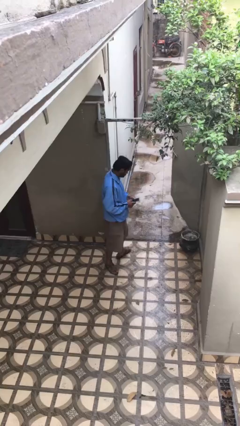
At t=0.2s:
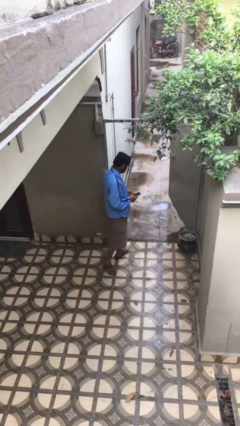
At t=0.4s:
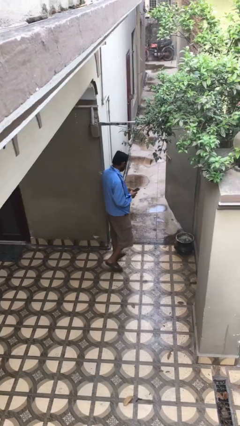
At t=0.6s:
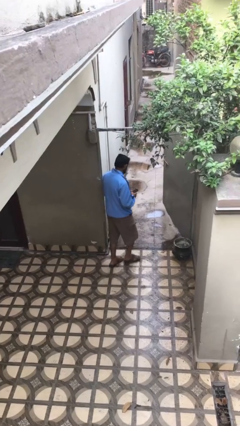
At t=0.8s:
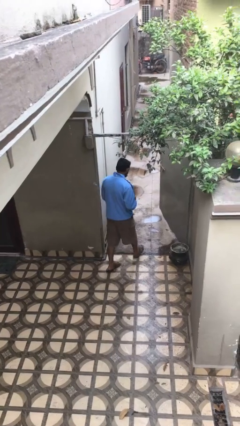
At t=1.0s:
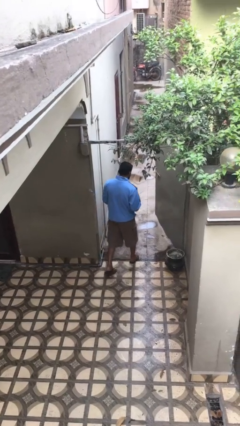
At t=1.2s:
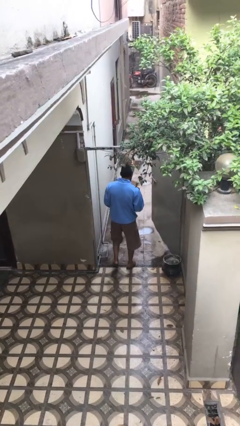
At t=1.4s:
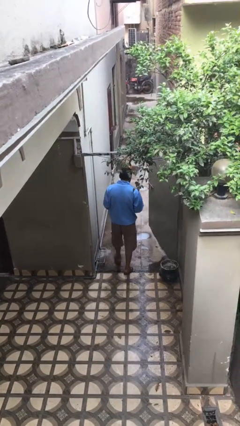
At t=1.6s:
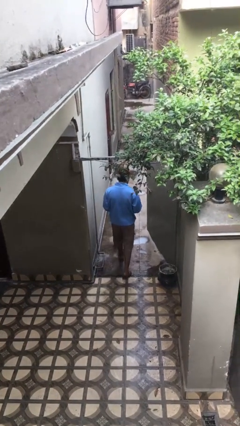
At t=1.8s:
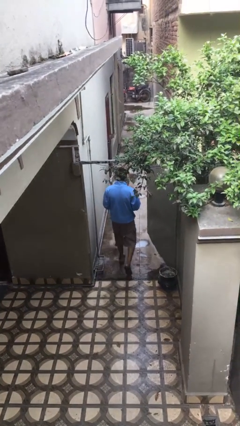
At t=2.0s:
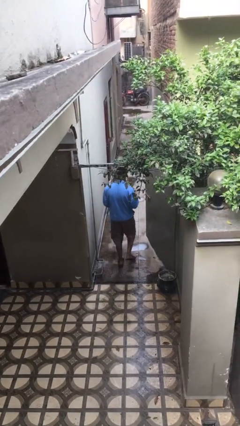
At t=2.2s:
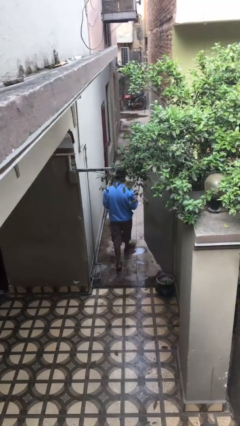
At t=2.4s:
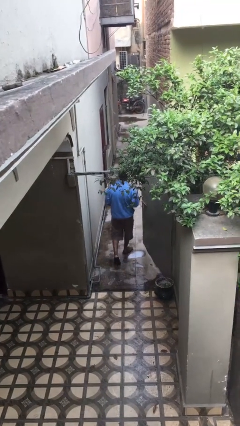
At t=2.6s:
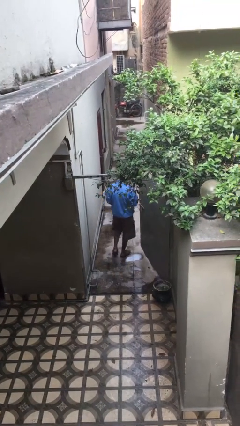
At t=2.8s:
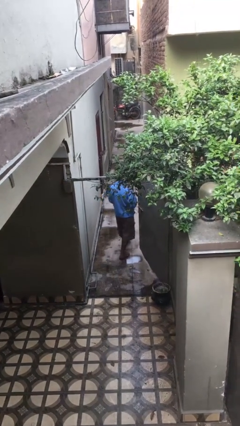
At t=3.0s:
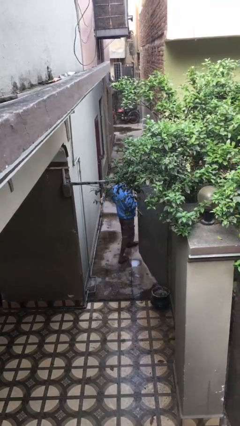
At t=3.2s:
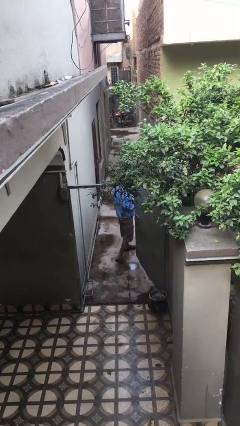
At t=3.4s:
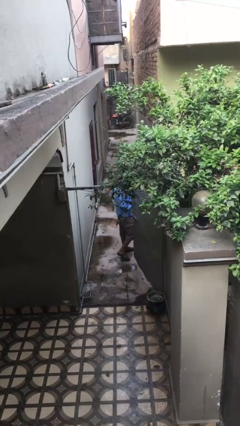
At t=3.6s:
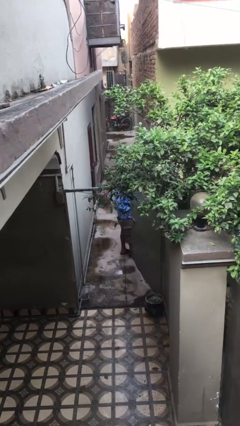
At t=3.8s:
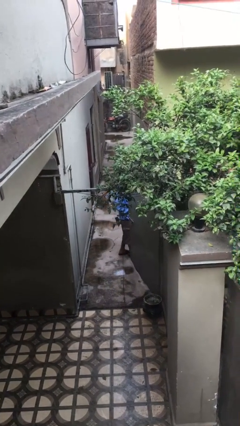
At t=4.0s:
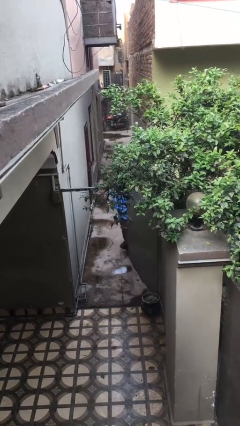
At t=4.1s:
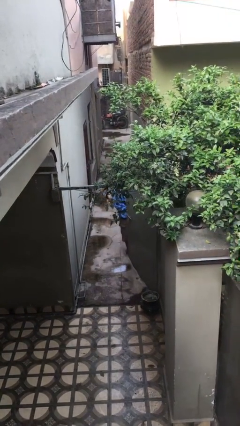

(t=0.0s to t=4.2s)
person exits scene through structure

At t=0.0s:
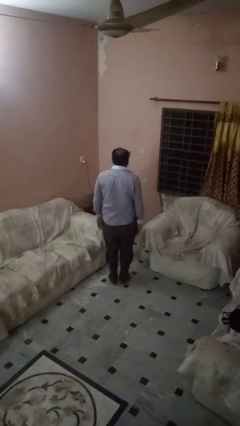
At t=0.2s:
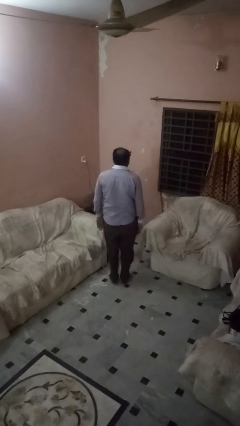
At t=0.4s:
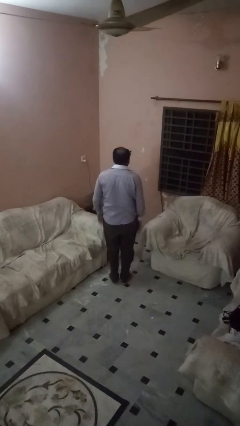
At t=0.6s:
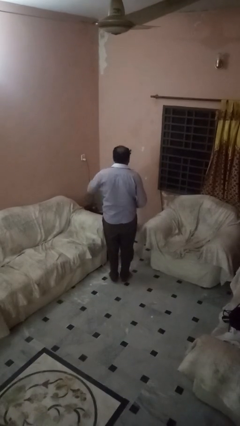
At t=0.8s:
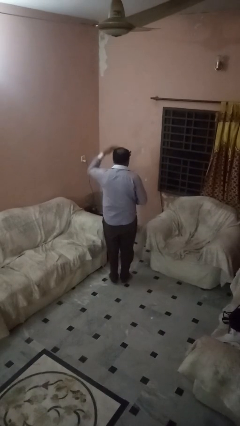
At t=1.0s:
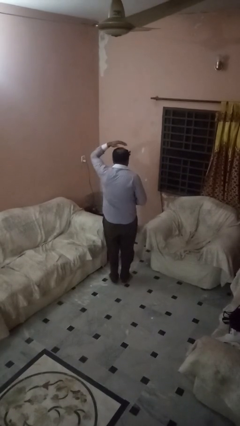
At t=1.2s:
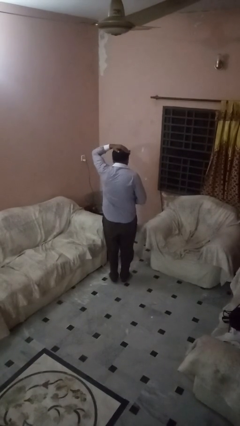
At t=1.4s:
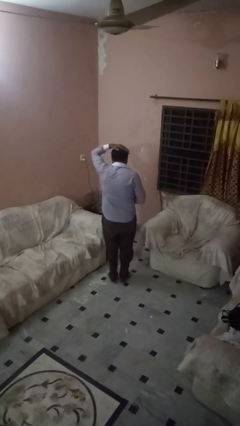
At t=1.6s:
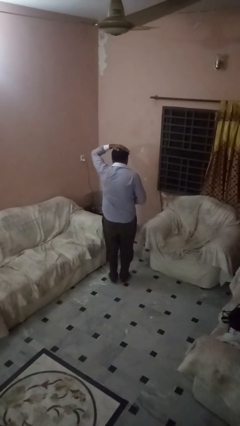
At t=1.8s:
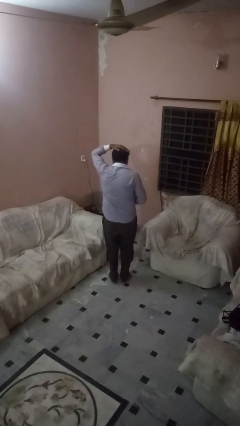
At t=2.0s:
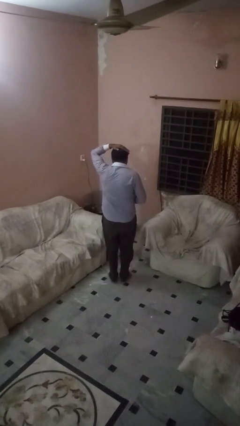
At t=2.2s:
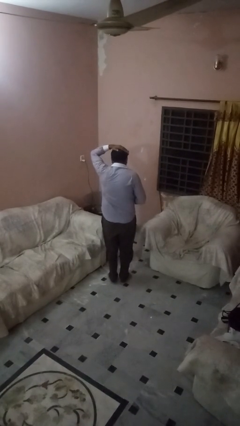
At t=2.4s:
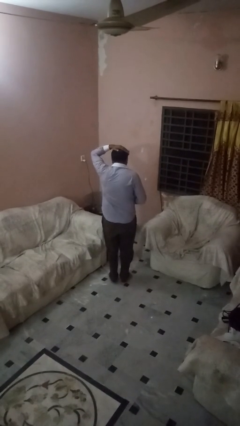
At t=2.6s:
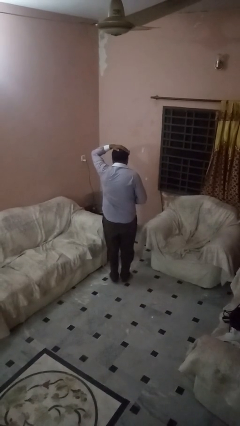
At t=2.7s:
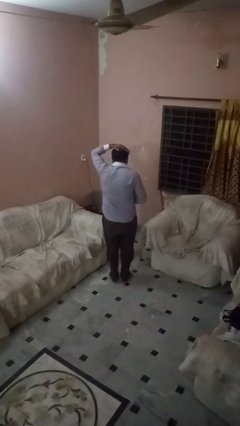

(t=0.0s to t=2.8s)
person pats head

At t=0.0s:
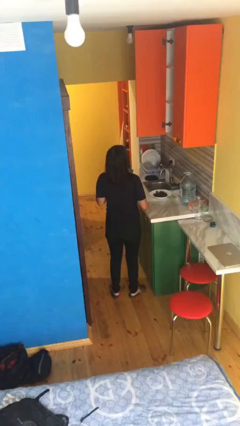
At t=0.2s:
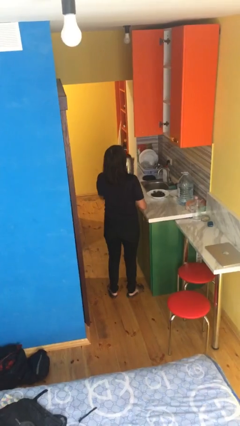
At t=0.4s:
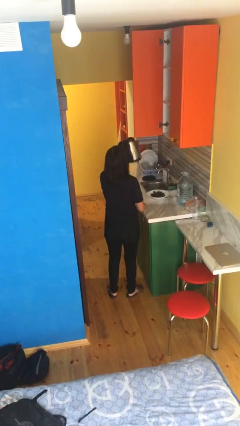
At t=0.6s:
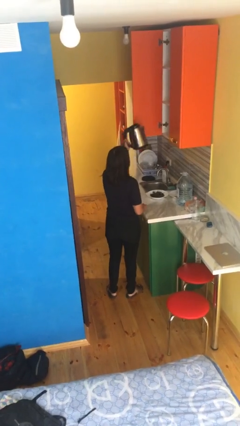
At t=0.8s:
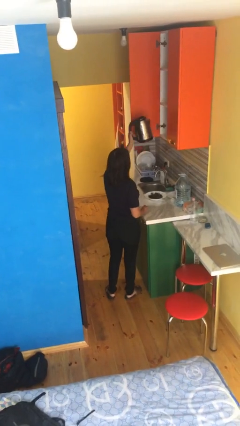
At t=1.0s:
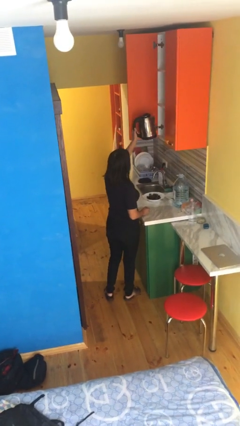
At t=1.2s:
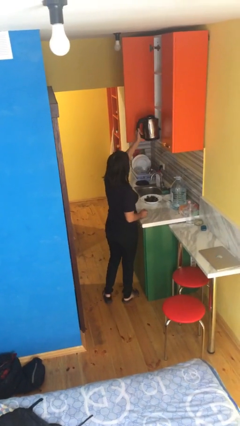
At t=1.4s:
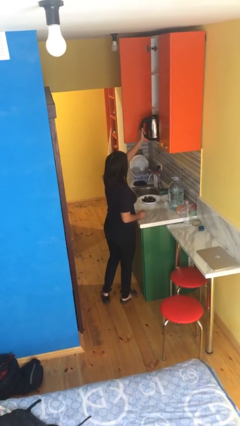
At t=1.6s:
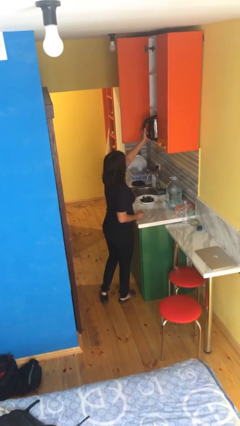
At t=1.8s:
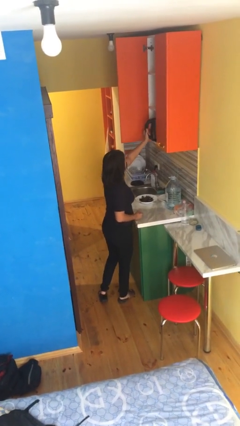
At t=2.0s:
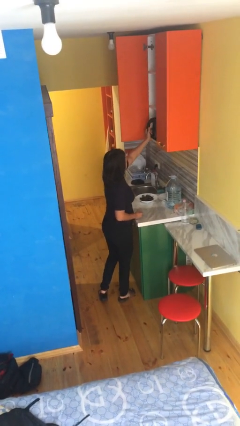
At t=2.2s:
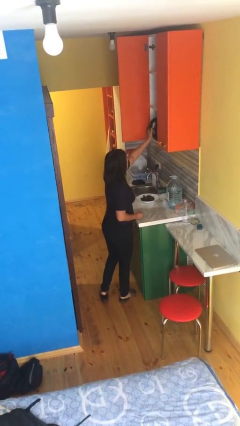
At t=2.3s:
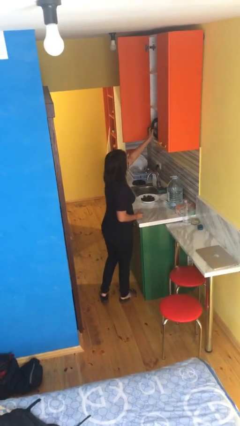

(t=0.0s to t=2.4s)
person puts down object into cabinet

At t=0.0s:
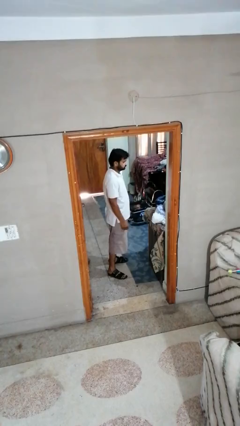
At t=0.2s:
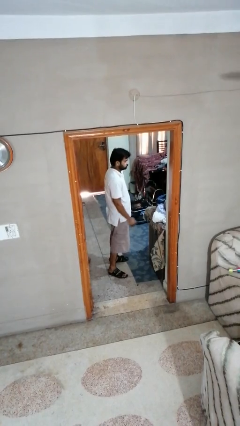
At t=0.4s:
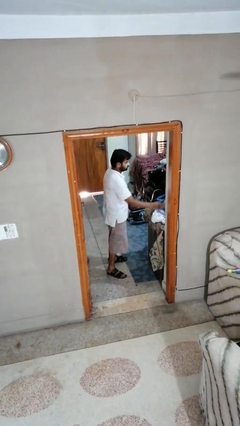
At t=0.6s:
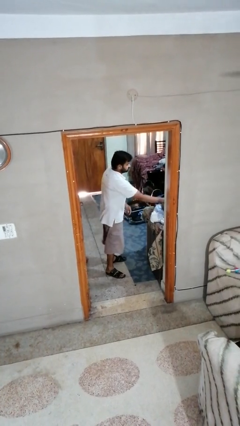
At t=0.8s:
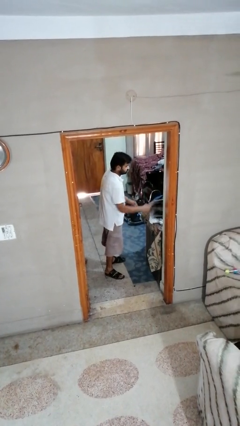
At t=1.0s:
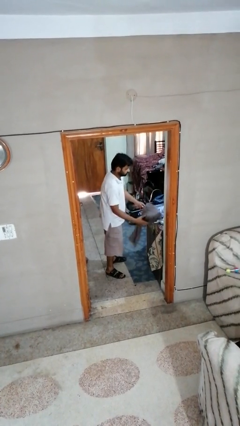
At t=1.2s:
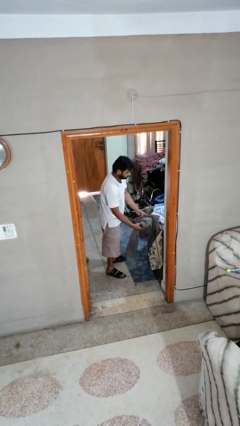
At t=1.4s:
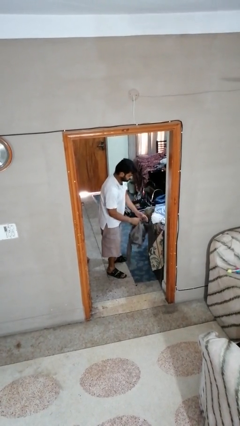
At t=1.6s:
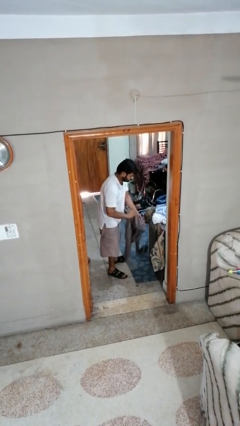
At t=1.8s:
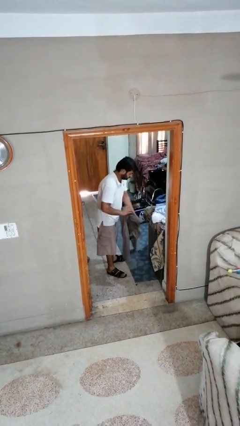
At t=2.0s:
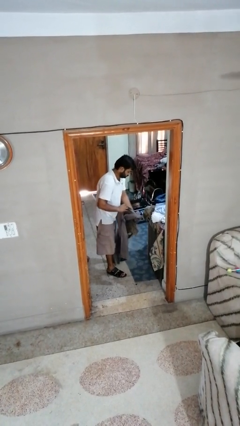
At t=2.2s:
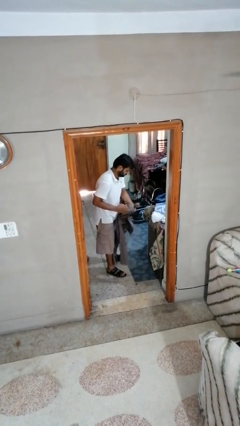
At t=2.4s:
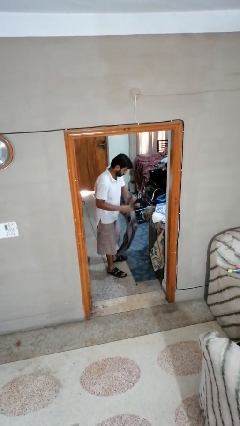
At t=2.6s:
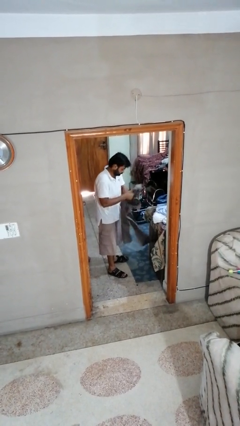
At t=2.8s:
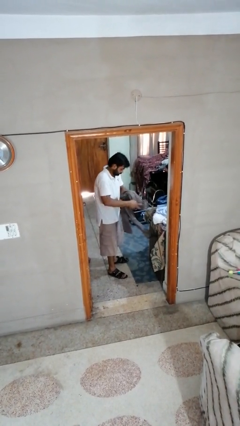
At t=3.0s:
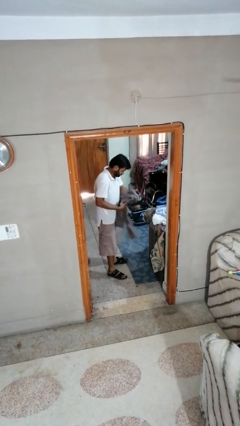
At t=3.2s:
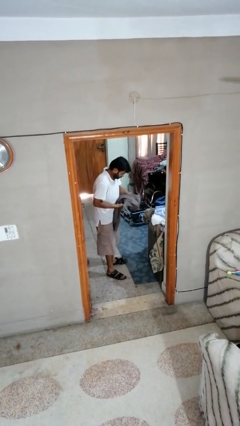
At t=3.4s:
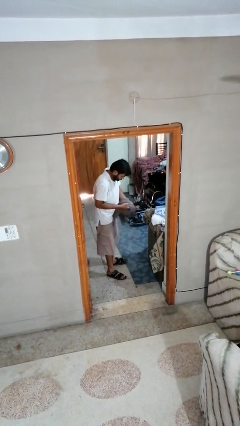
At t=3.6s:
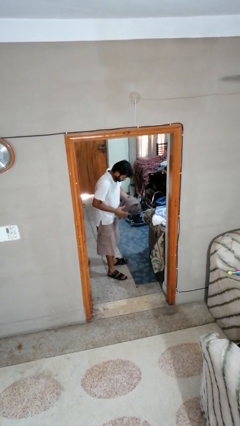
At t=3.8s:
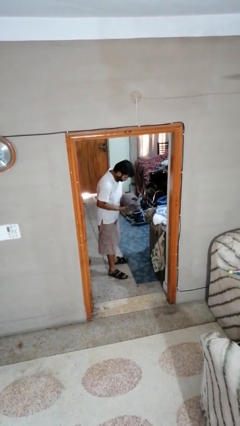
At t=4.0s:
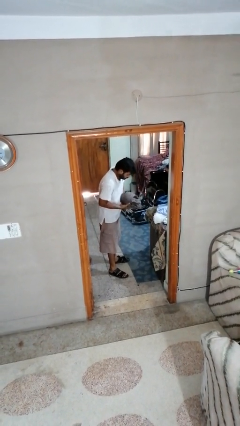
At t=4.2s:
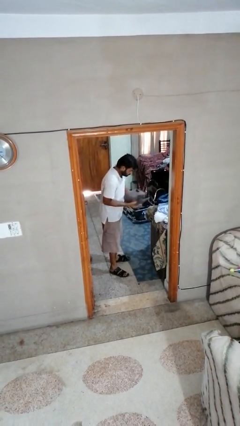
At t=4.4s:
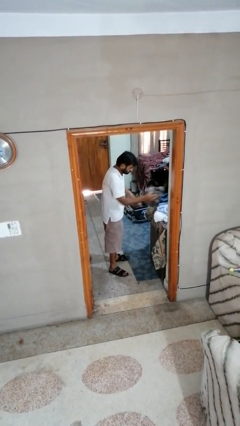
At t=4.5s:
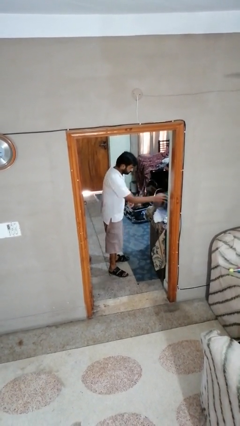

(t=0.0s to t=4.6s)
person folds pants

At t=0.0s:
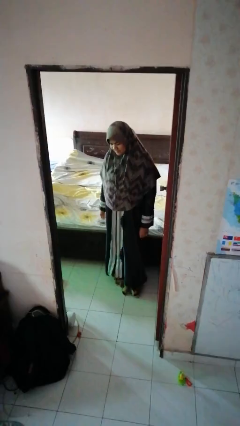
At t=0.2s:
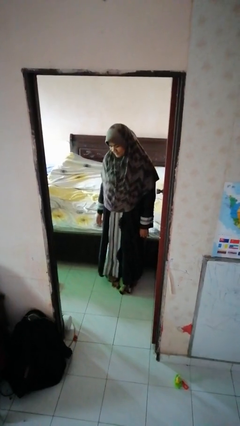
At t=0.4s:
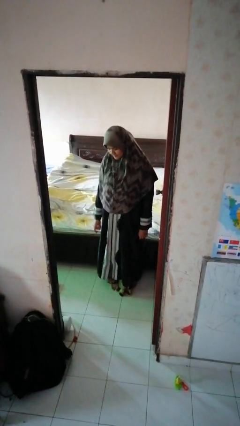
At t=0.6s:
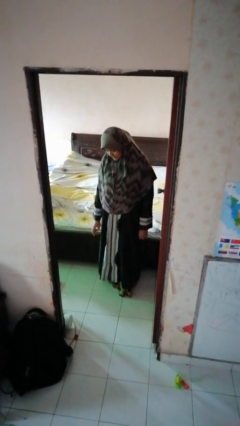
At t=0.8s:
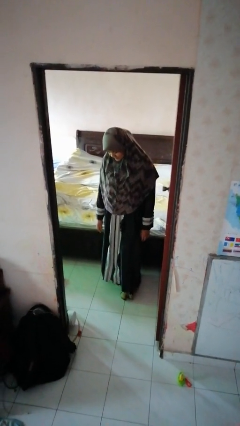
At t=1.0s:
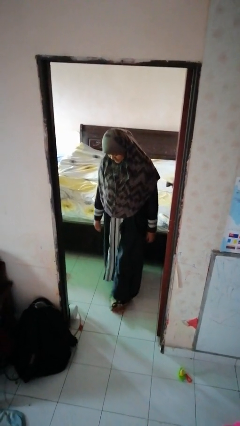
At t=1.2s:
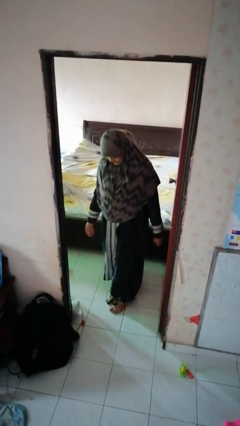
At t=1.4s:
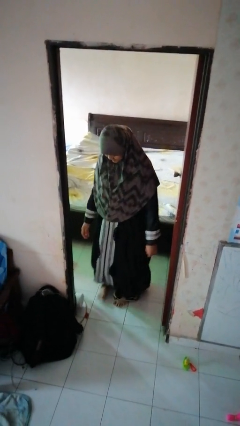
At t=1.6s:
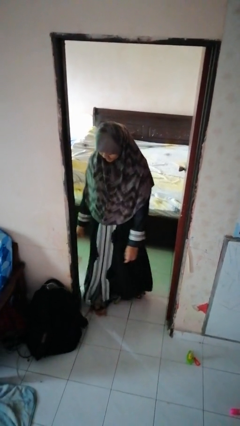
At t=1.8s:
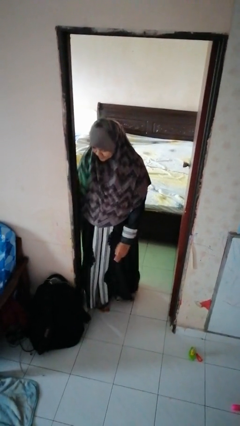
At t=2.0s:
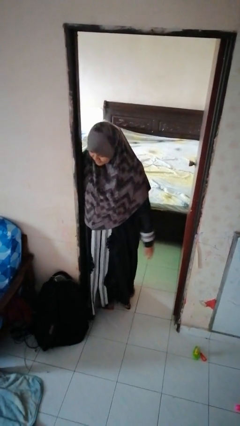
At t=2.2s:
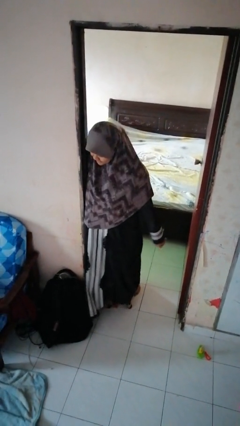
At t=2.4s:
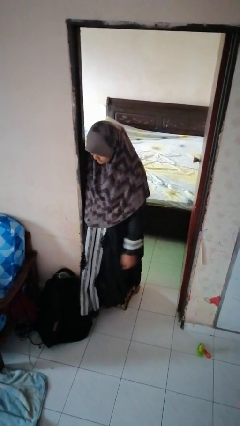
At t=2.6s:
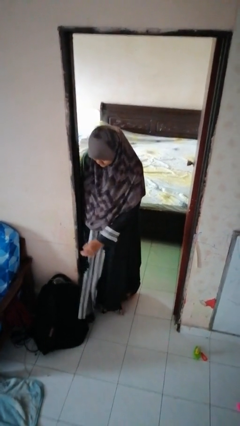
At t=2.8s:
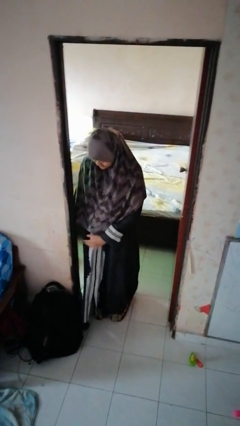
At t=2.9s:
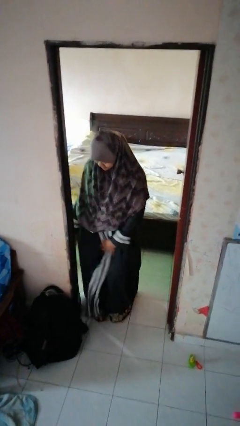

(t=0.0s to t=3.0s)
person bumps into wall
